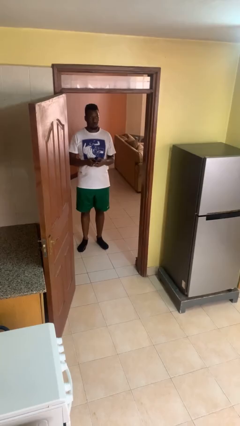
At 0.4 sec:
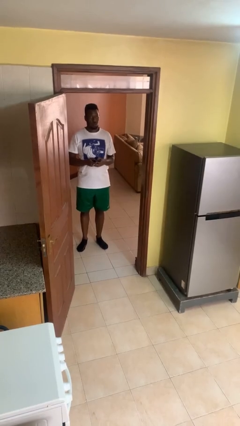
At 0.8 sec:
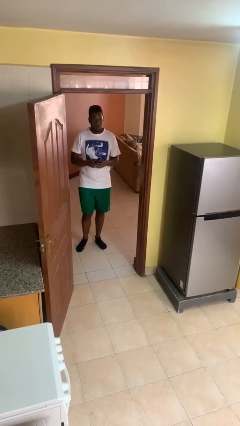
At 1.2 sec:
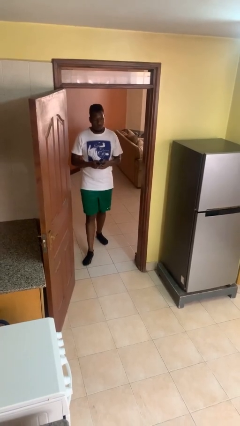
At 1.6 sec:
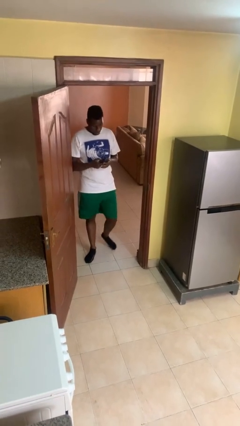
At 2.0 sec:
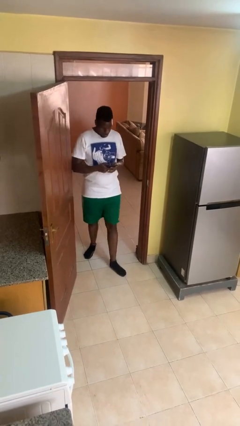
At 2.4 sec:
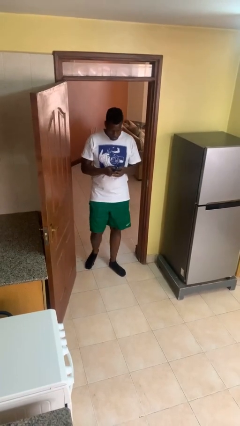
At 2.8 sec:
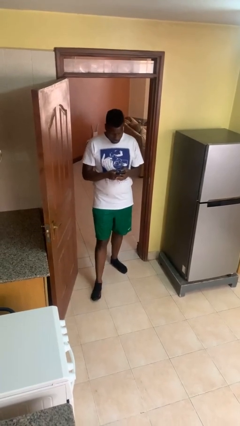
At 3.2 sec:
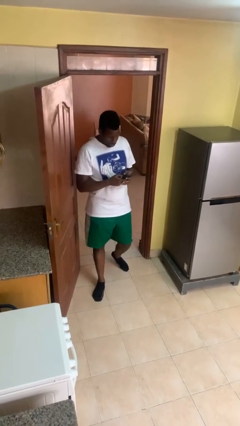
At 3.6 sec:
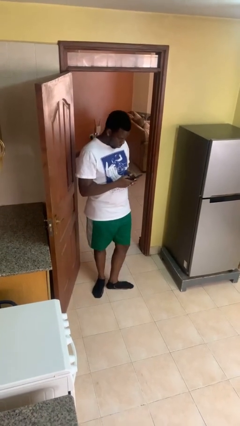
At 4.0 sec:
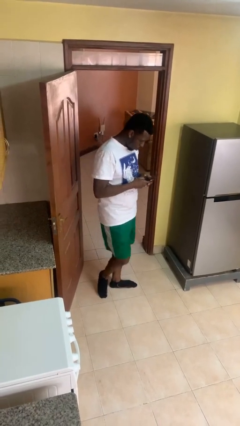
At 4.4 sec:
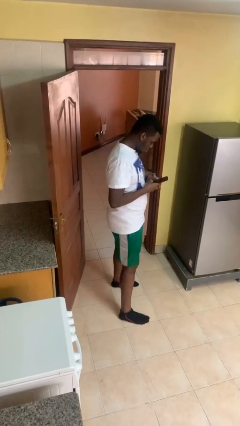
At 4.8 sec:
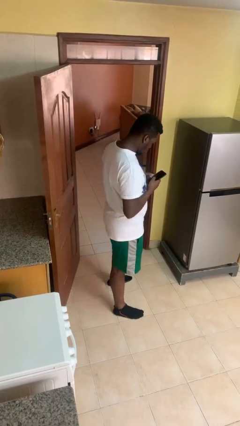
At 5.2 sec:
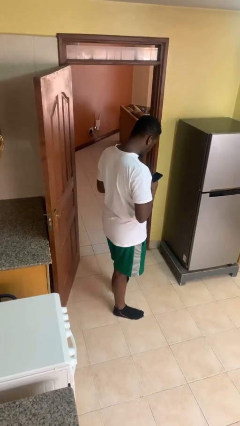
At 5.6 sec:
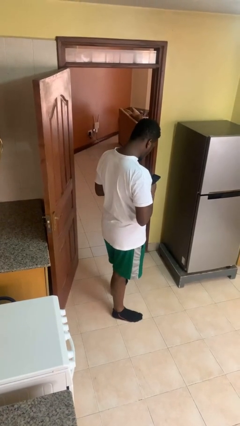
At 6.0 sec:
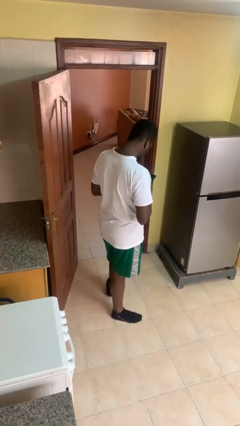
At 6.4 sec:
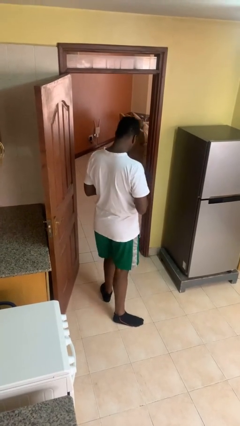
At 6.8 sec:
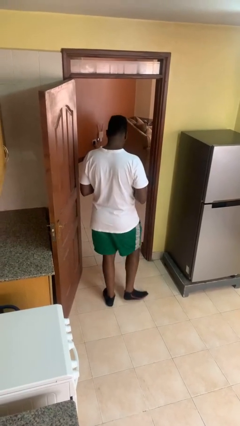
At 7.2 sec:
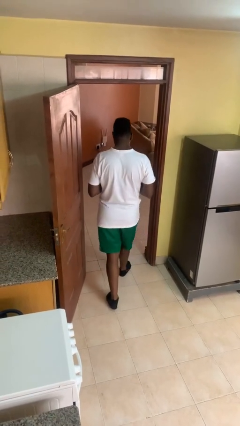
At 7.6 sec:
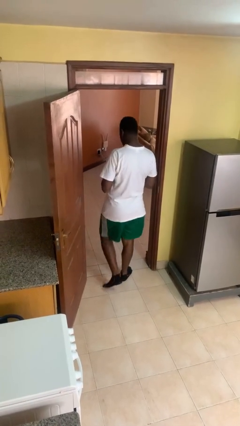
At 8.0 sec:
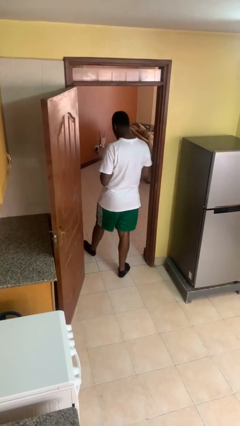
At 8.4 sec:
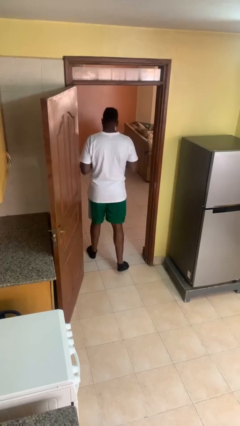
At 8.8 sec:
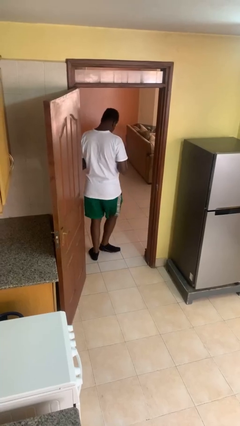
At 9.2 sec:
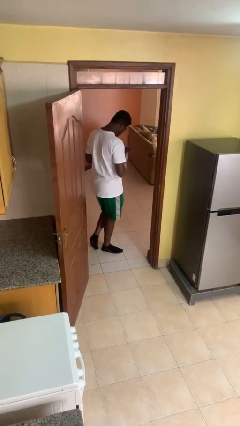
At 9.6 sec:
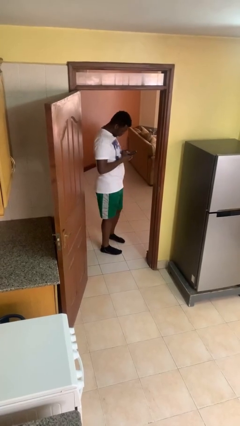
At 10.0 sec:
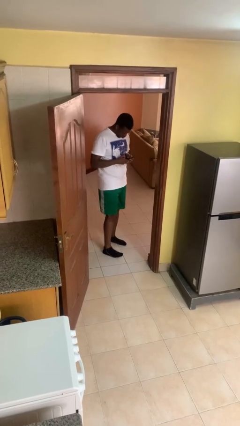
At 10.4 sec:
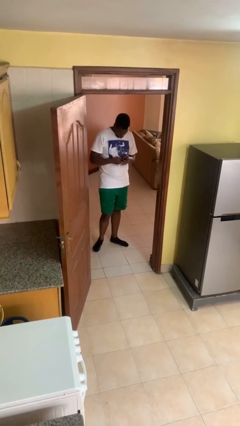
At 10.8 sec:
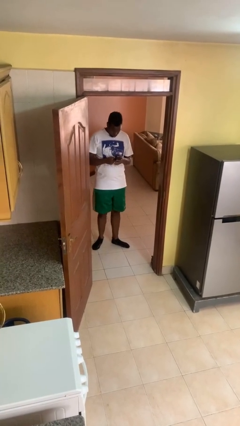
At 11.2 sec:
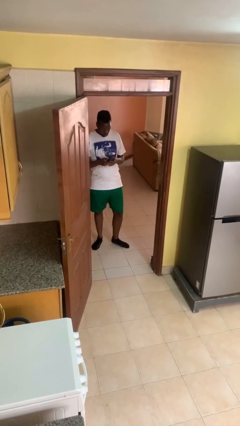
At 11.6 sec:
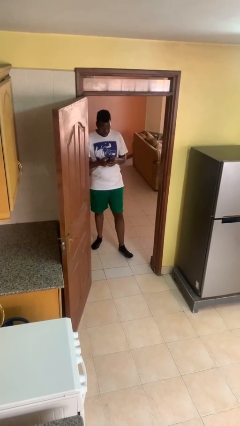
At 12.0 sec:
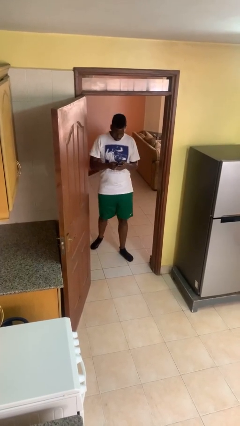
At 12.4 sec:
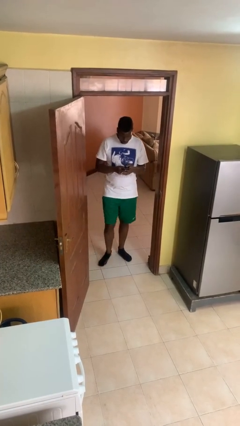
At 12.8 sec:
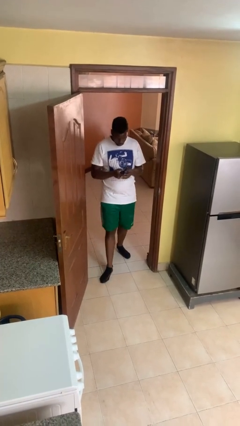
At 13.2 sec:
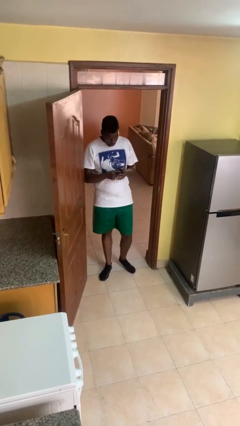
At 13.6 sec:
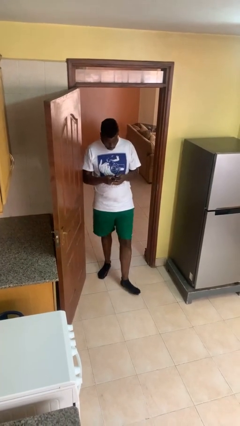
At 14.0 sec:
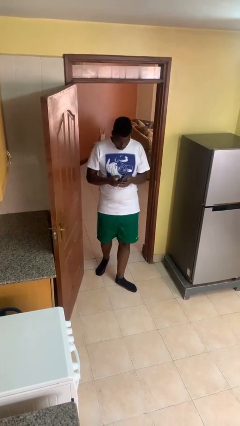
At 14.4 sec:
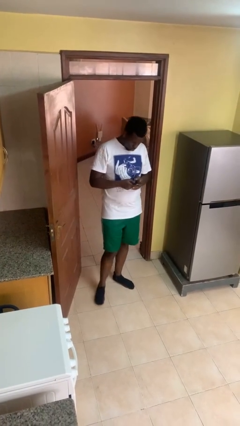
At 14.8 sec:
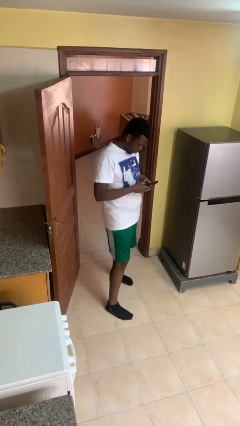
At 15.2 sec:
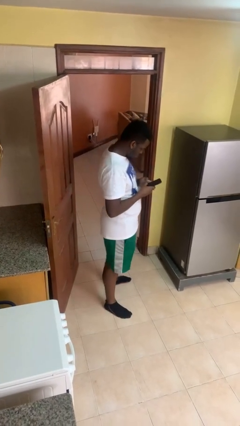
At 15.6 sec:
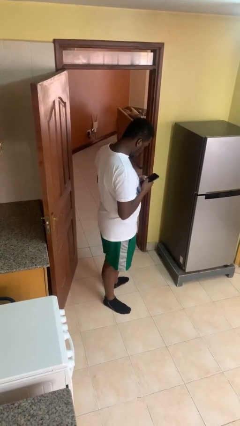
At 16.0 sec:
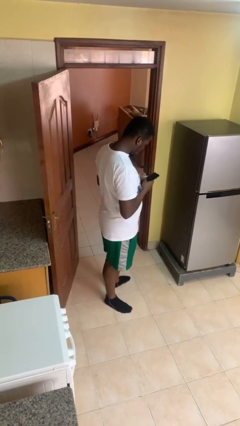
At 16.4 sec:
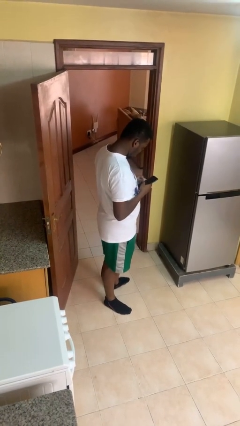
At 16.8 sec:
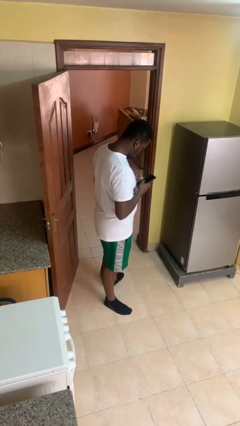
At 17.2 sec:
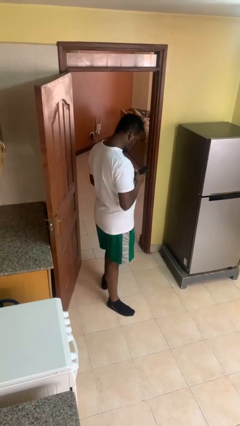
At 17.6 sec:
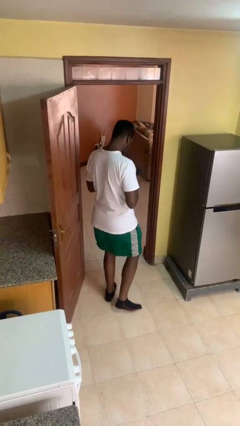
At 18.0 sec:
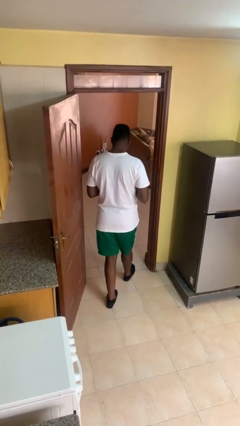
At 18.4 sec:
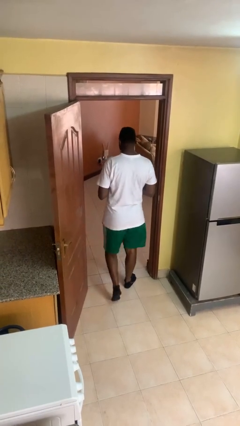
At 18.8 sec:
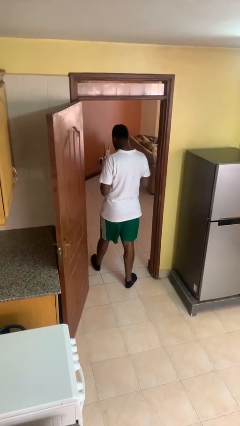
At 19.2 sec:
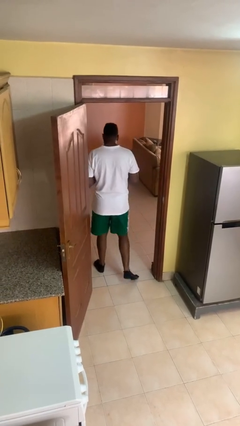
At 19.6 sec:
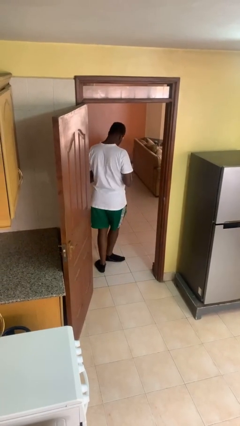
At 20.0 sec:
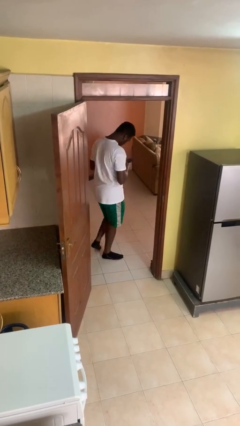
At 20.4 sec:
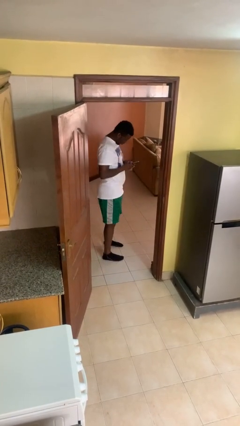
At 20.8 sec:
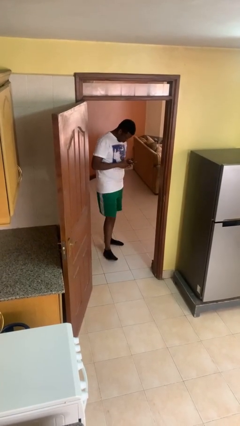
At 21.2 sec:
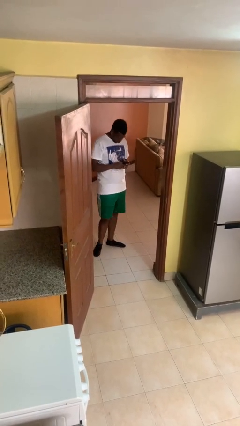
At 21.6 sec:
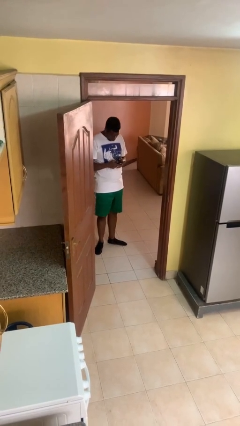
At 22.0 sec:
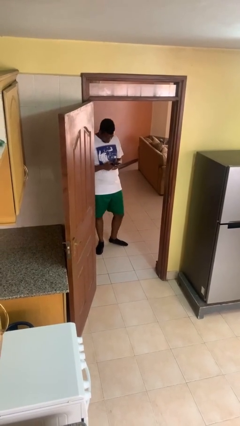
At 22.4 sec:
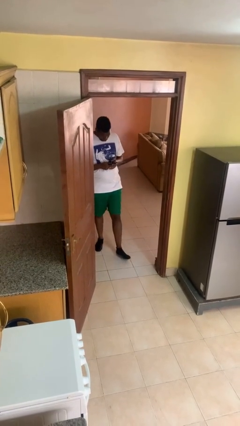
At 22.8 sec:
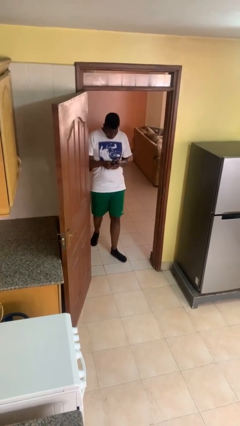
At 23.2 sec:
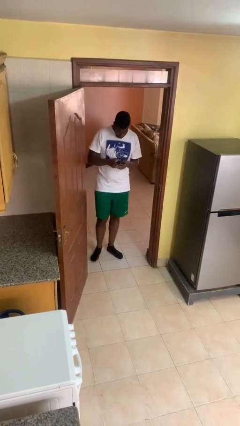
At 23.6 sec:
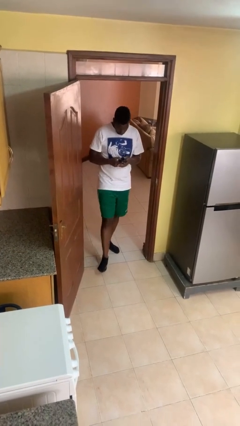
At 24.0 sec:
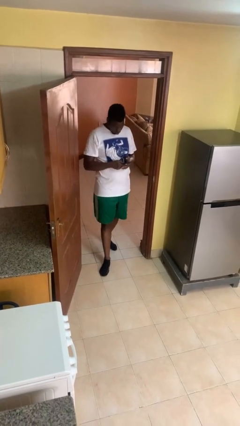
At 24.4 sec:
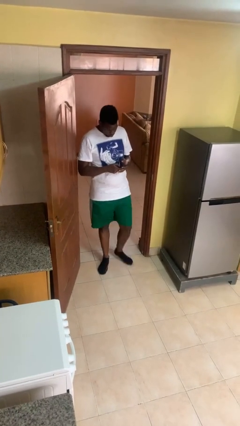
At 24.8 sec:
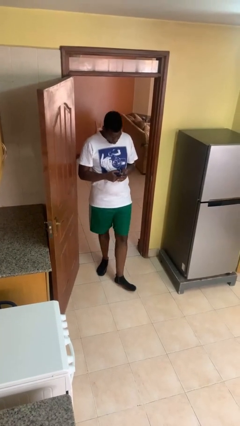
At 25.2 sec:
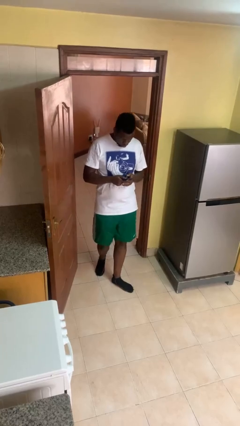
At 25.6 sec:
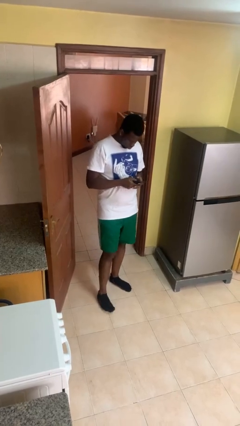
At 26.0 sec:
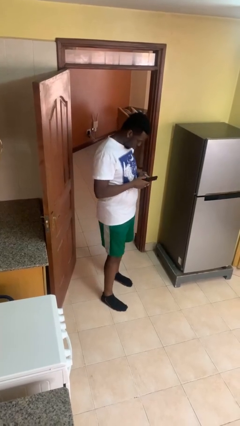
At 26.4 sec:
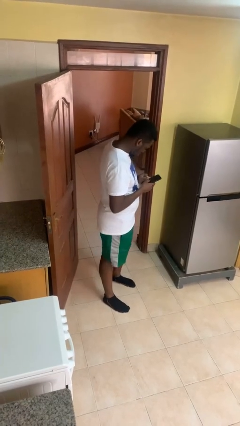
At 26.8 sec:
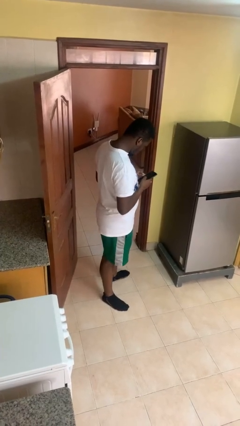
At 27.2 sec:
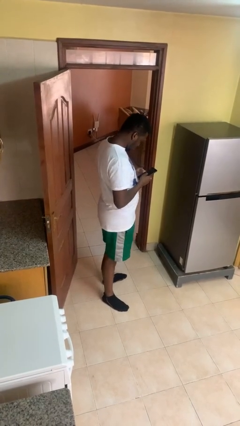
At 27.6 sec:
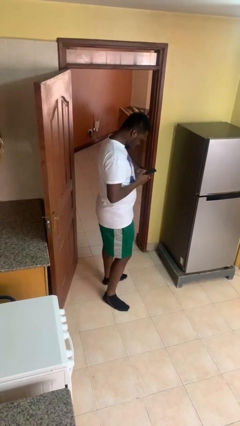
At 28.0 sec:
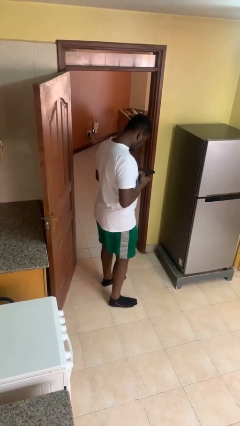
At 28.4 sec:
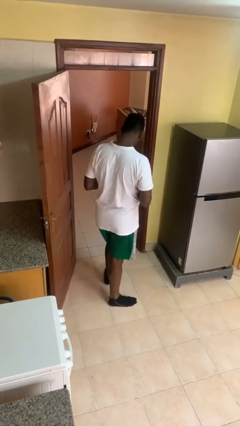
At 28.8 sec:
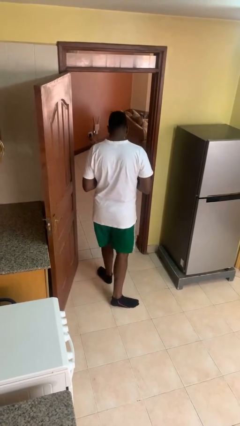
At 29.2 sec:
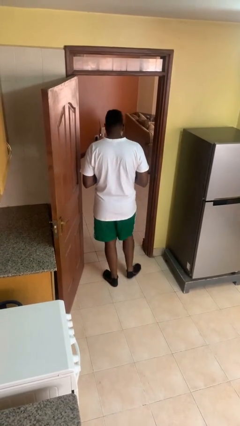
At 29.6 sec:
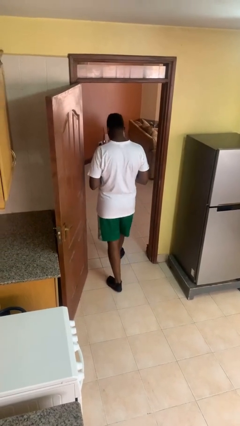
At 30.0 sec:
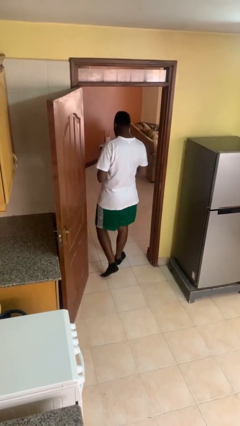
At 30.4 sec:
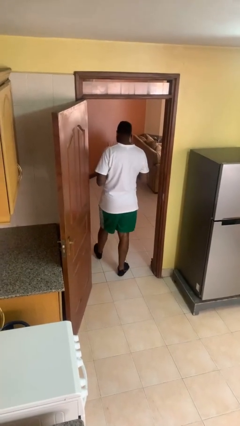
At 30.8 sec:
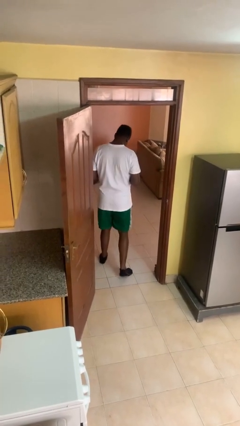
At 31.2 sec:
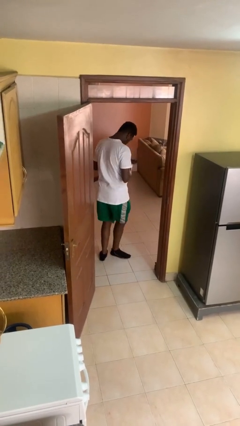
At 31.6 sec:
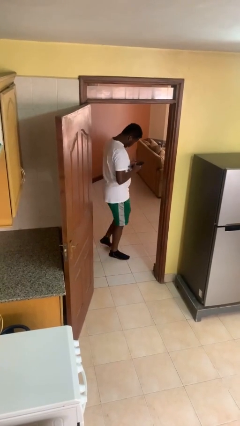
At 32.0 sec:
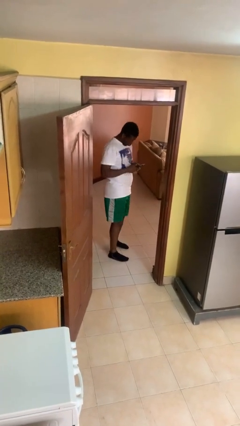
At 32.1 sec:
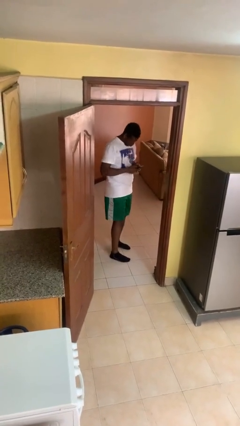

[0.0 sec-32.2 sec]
person texts on phone

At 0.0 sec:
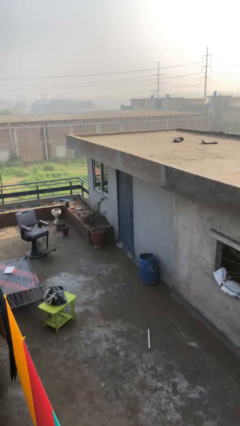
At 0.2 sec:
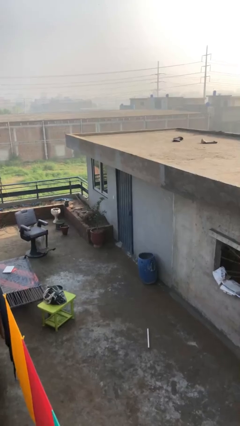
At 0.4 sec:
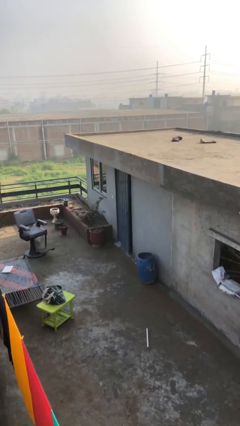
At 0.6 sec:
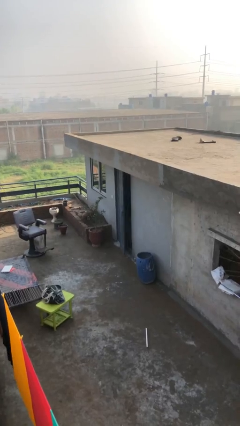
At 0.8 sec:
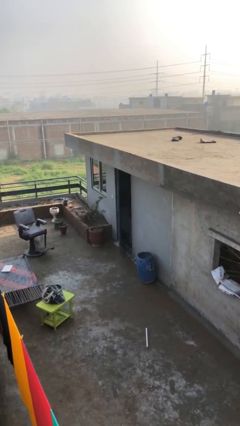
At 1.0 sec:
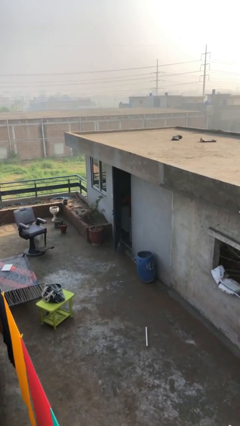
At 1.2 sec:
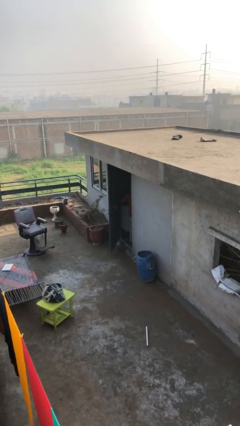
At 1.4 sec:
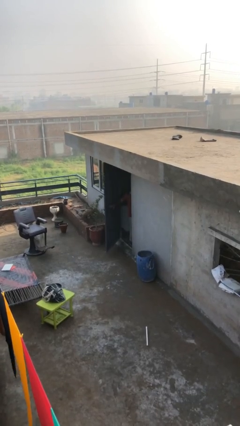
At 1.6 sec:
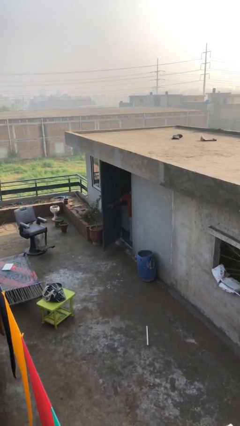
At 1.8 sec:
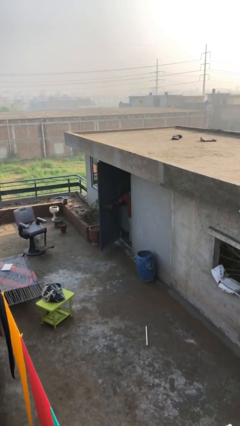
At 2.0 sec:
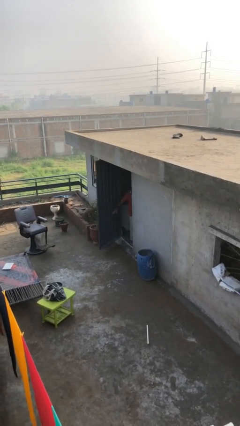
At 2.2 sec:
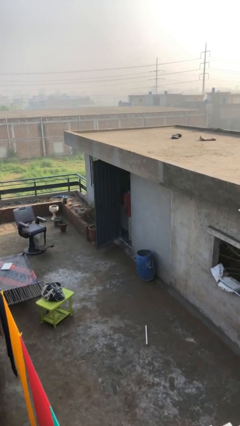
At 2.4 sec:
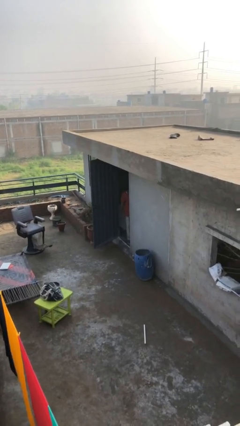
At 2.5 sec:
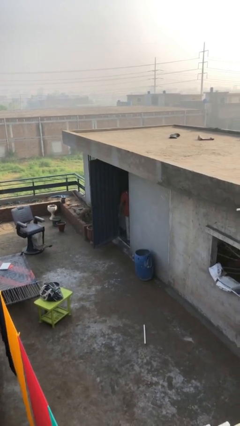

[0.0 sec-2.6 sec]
person opens facility door
